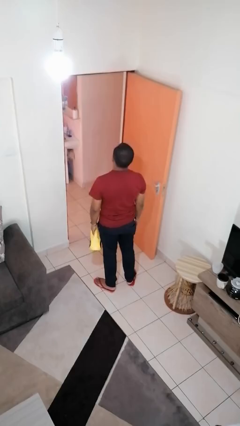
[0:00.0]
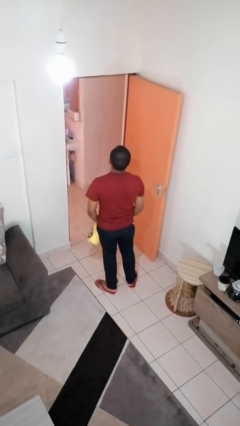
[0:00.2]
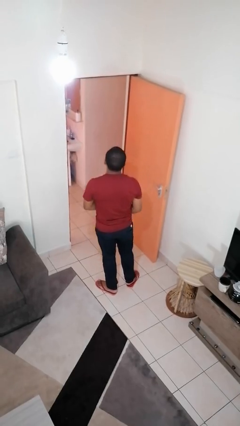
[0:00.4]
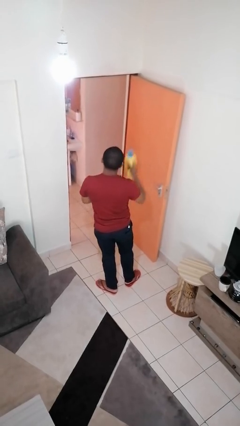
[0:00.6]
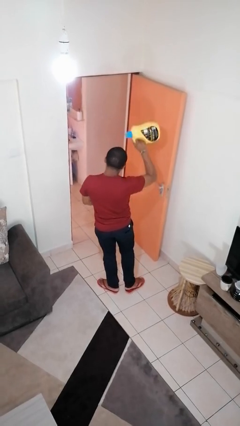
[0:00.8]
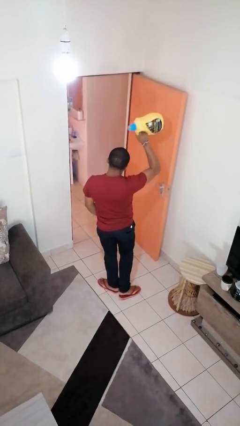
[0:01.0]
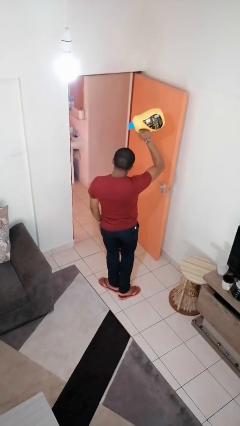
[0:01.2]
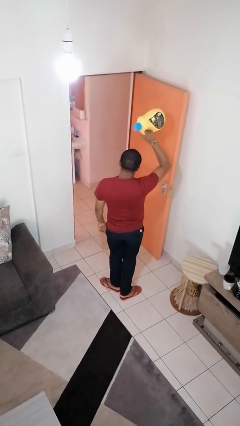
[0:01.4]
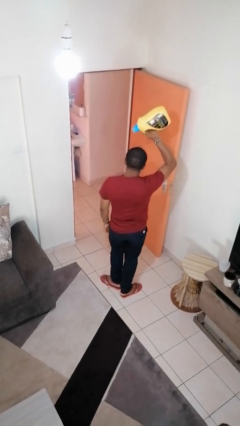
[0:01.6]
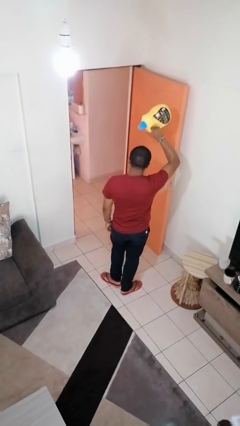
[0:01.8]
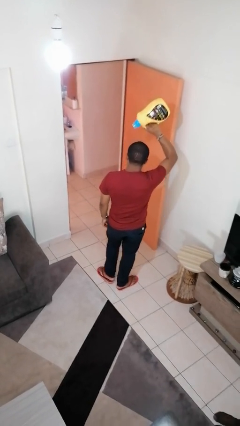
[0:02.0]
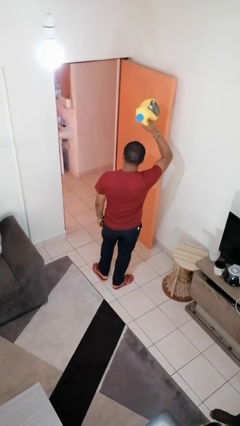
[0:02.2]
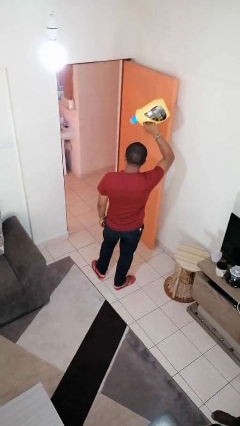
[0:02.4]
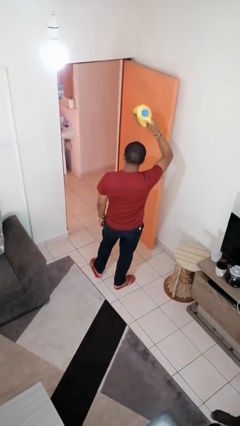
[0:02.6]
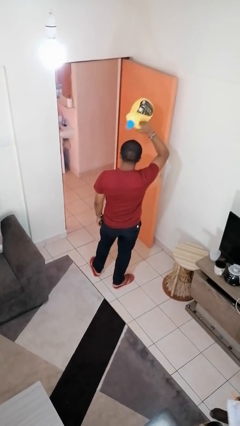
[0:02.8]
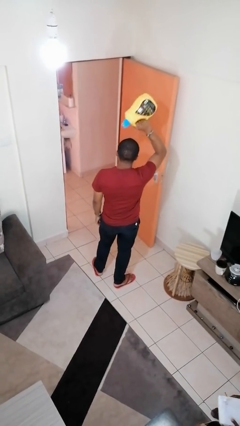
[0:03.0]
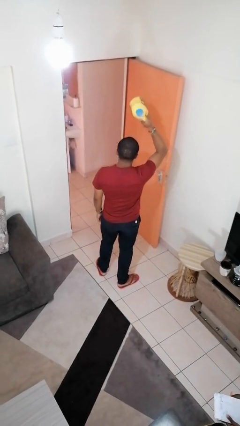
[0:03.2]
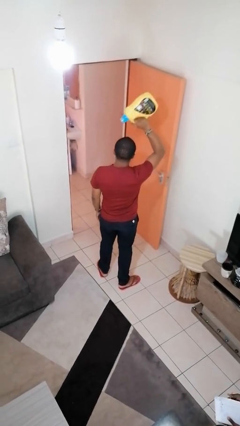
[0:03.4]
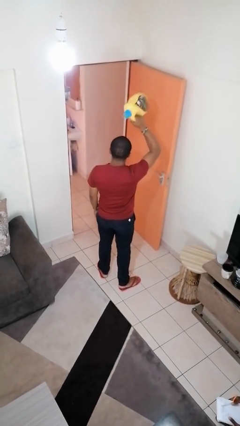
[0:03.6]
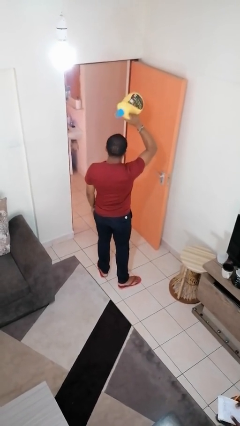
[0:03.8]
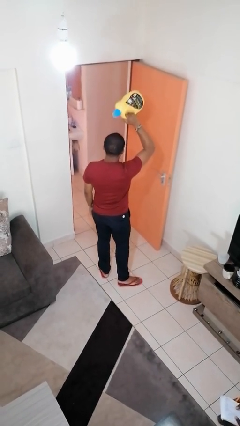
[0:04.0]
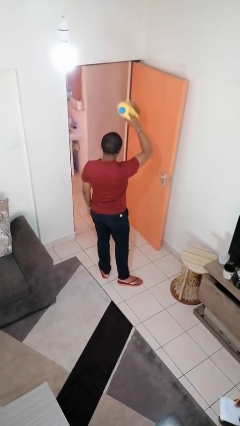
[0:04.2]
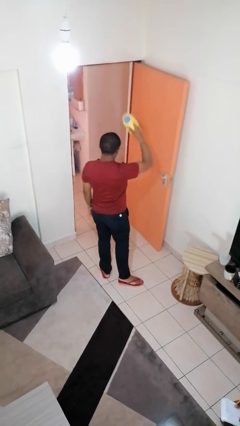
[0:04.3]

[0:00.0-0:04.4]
person holds object above head

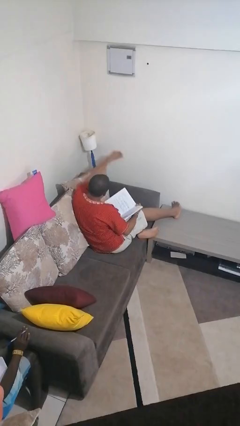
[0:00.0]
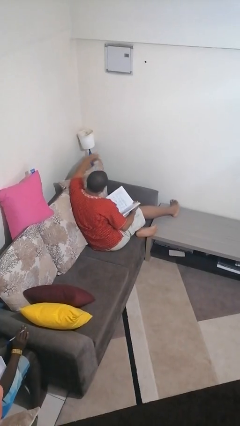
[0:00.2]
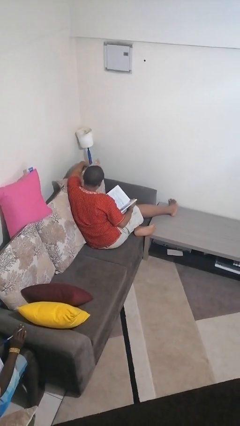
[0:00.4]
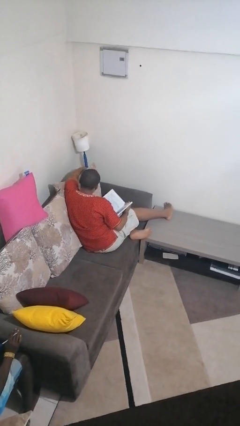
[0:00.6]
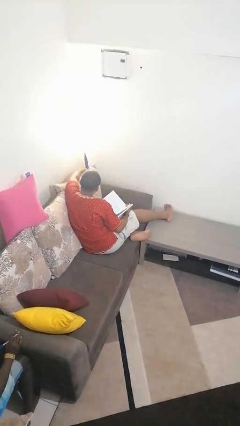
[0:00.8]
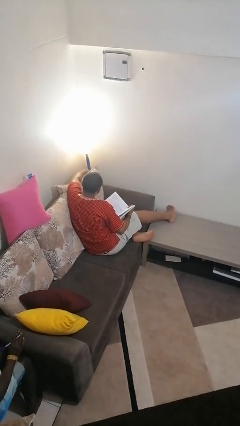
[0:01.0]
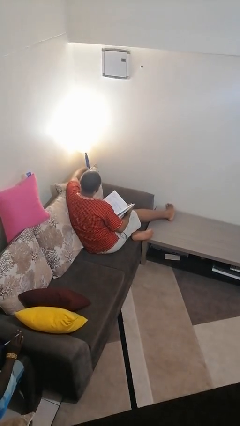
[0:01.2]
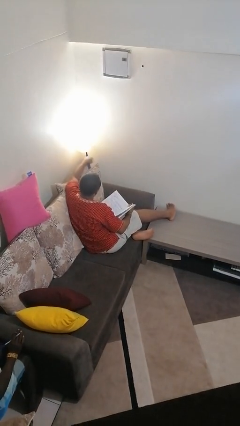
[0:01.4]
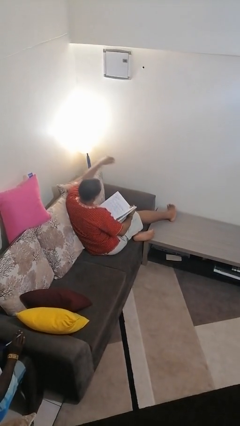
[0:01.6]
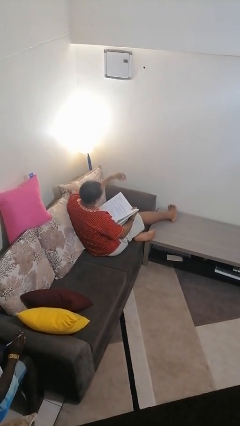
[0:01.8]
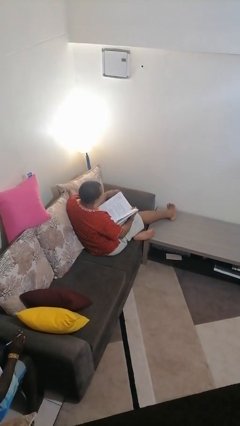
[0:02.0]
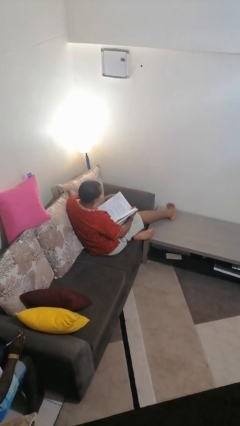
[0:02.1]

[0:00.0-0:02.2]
person turns on lamp

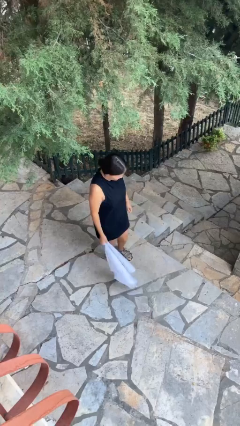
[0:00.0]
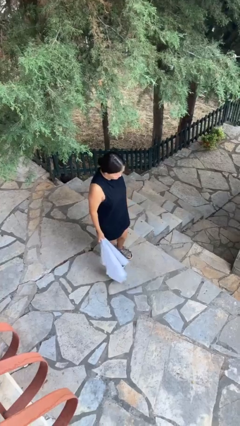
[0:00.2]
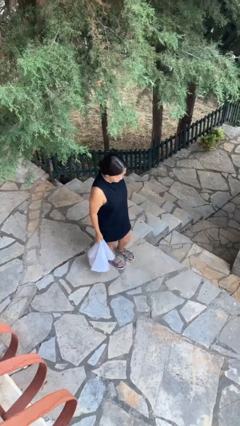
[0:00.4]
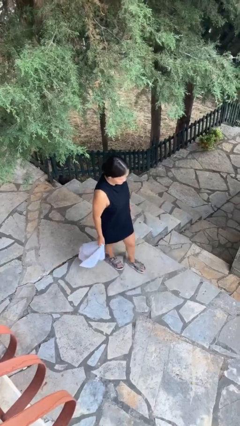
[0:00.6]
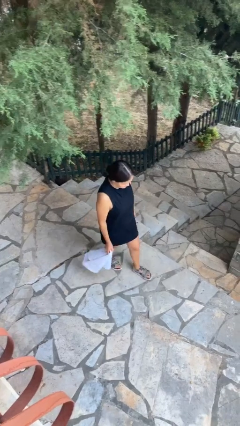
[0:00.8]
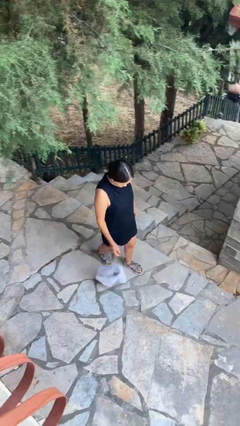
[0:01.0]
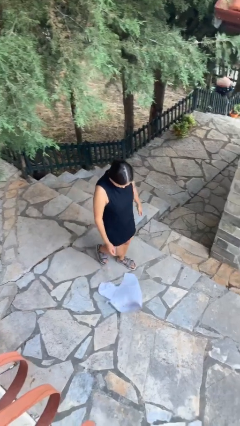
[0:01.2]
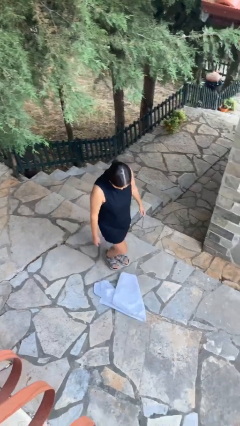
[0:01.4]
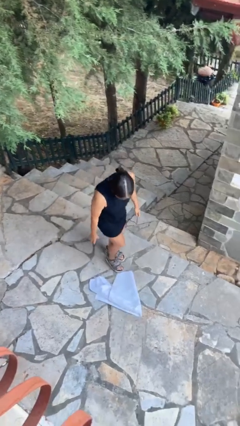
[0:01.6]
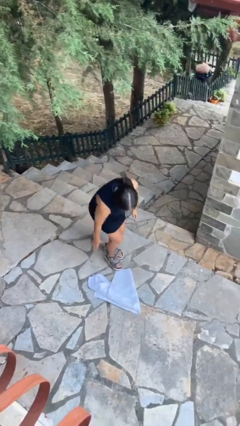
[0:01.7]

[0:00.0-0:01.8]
person drops object

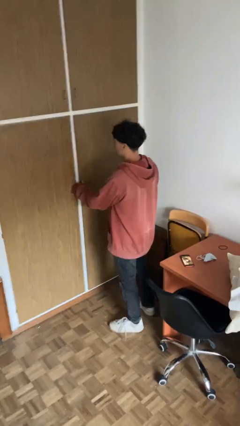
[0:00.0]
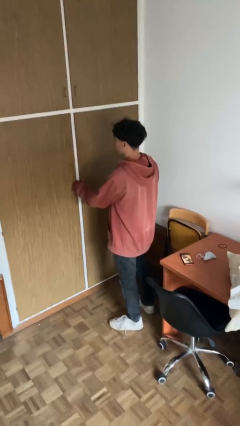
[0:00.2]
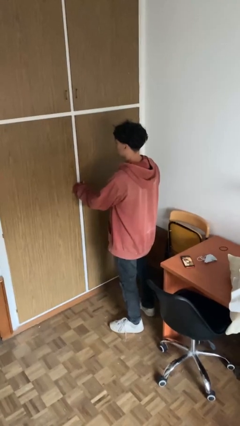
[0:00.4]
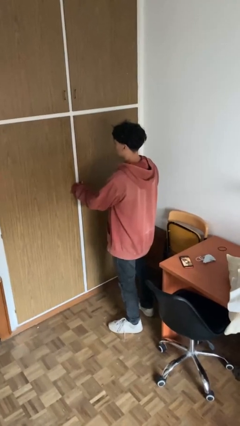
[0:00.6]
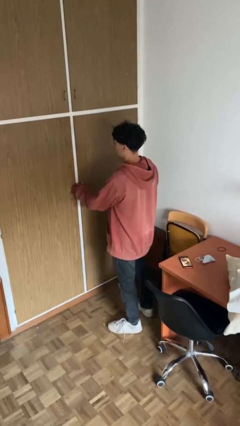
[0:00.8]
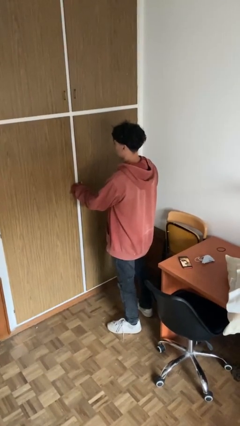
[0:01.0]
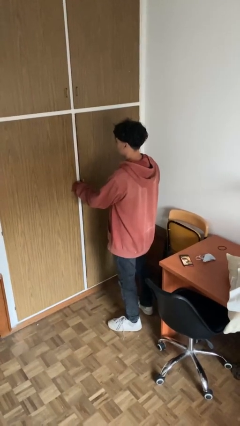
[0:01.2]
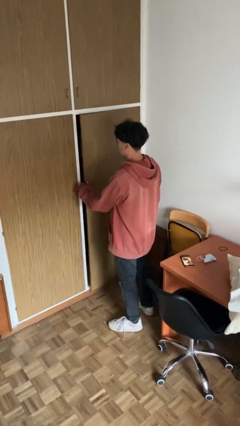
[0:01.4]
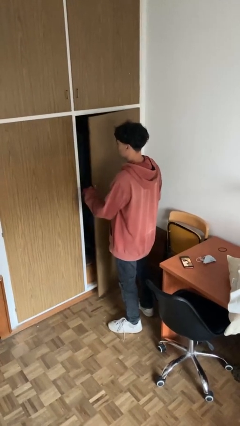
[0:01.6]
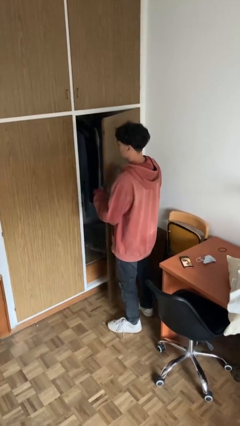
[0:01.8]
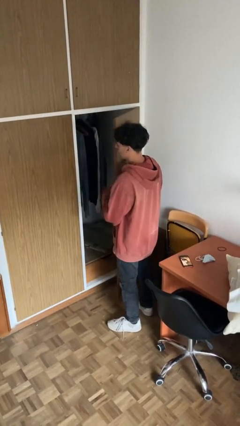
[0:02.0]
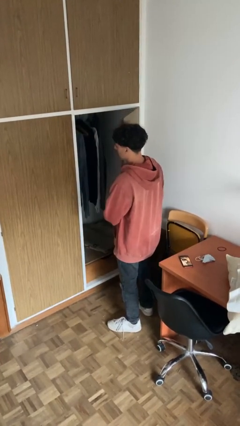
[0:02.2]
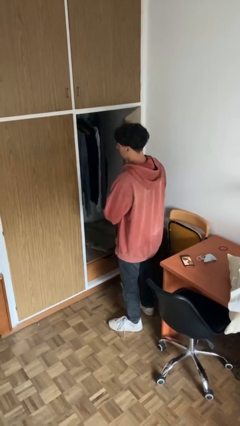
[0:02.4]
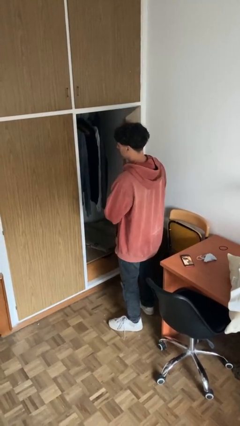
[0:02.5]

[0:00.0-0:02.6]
person opens closet door

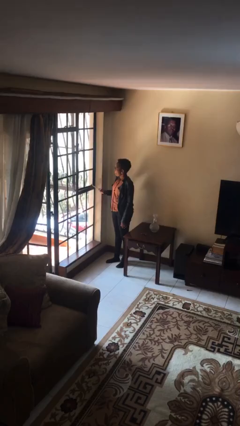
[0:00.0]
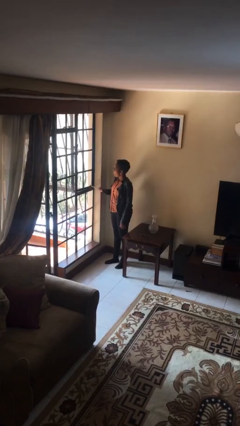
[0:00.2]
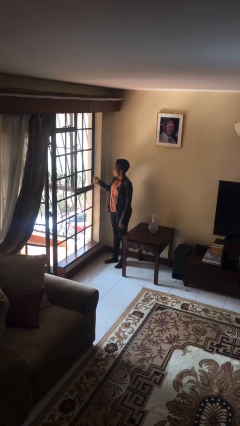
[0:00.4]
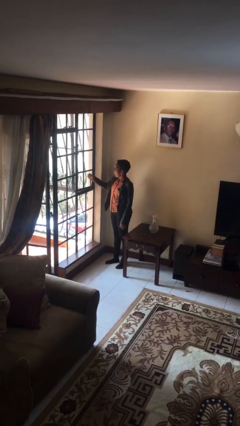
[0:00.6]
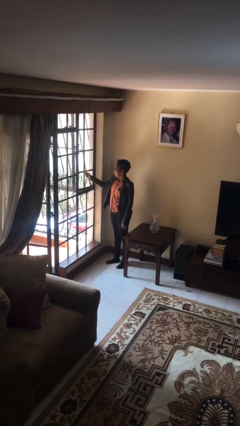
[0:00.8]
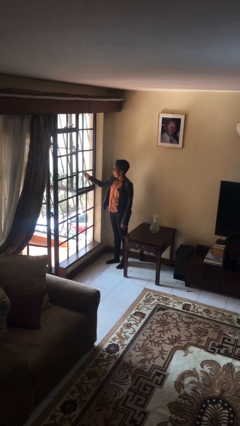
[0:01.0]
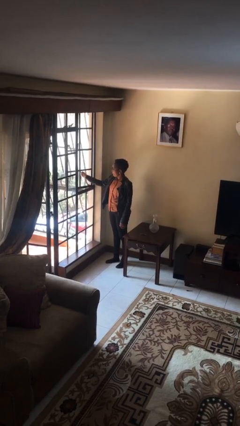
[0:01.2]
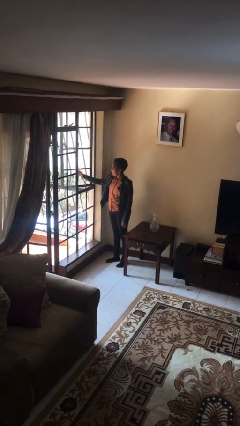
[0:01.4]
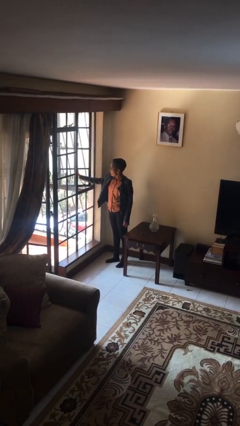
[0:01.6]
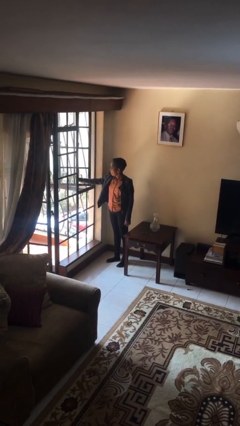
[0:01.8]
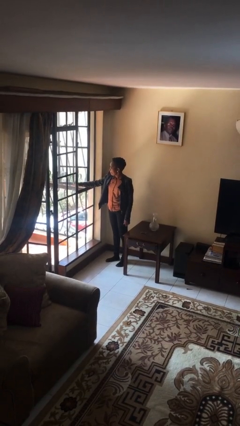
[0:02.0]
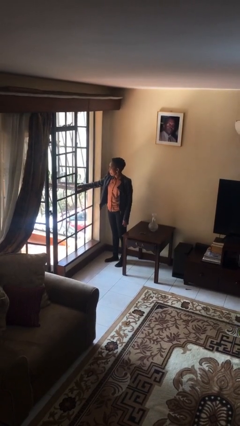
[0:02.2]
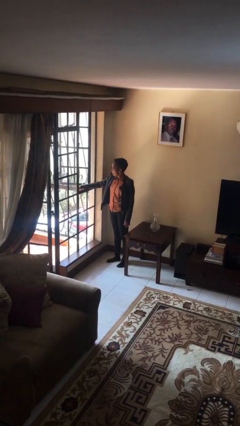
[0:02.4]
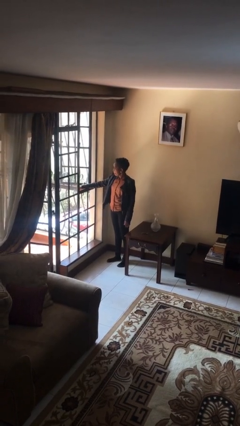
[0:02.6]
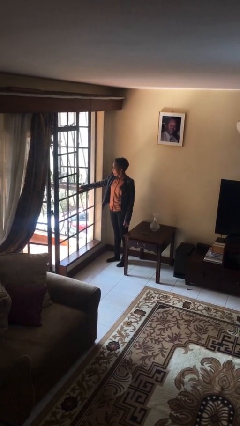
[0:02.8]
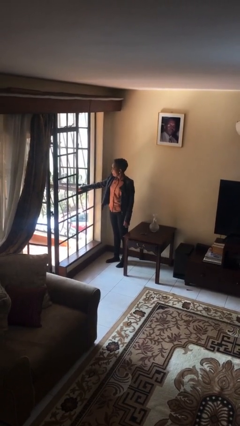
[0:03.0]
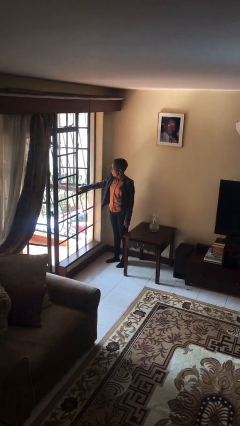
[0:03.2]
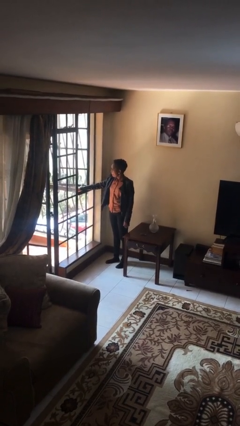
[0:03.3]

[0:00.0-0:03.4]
person opens home window

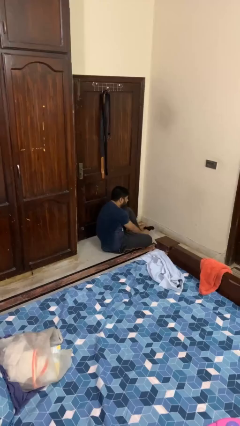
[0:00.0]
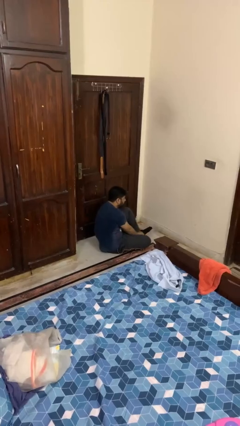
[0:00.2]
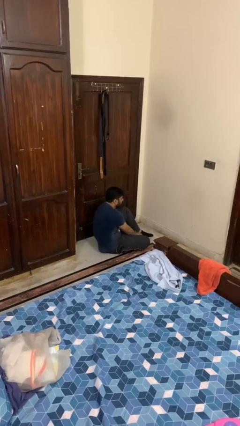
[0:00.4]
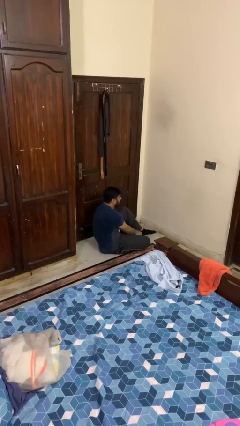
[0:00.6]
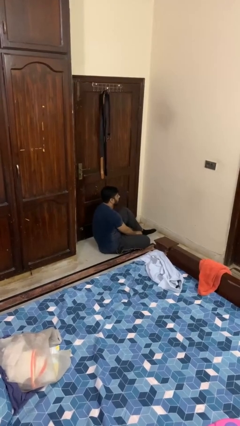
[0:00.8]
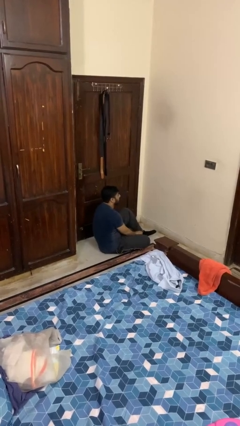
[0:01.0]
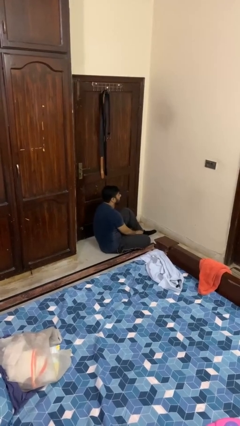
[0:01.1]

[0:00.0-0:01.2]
person puts on socks

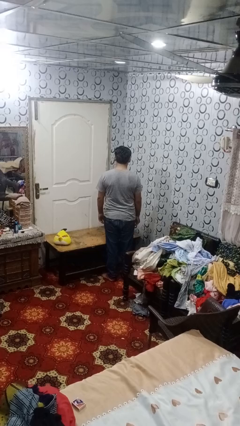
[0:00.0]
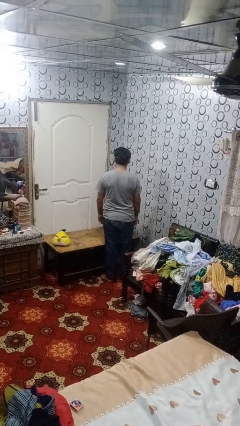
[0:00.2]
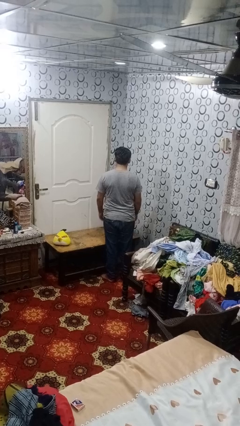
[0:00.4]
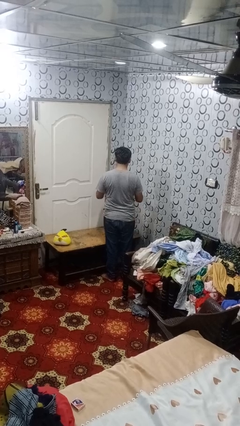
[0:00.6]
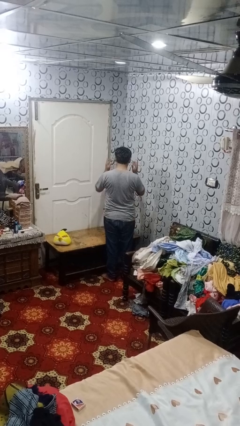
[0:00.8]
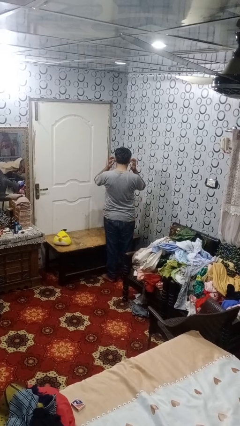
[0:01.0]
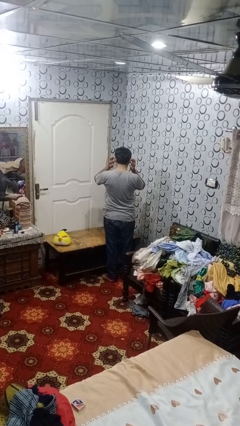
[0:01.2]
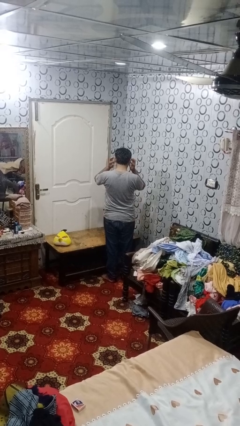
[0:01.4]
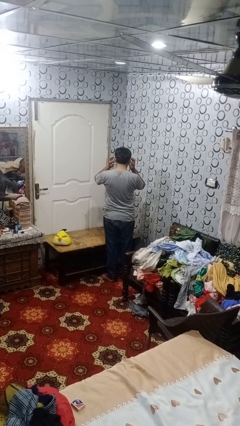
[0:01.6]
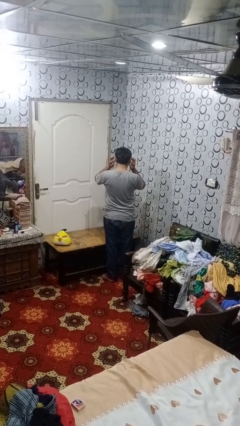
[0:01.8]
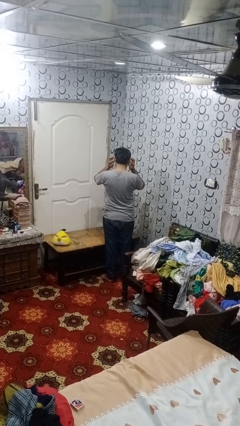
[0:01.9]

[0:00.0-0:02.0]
person puts fingers in ear
